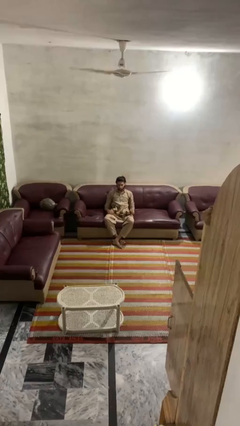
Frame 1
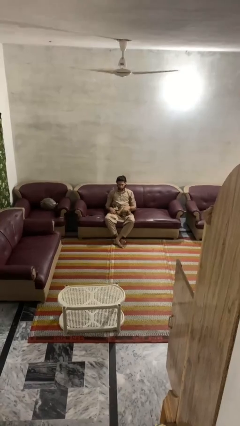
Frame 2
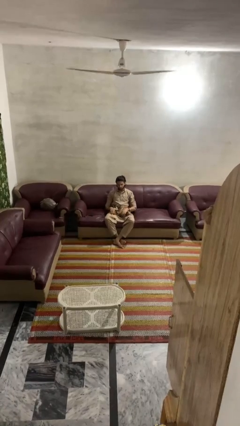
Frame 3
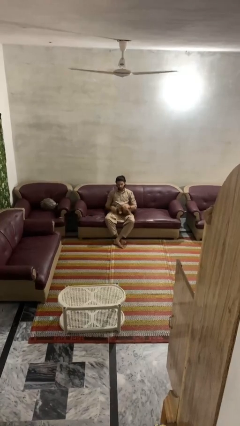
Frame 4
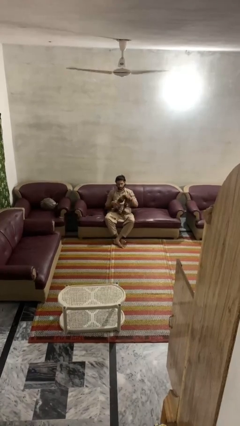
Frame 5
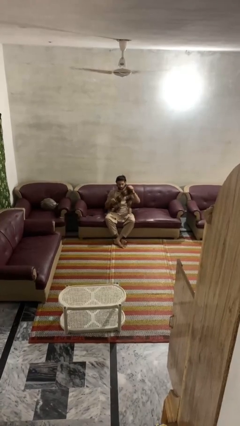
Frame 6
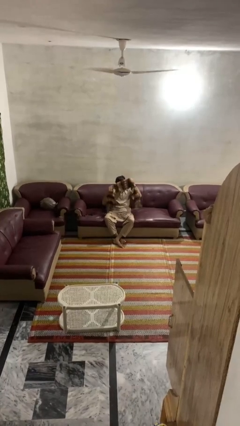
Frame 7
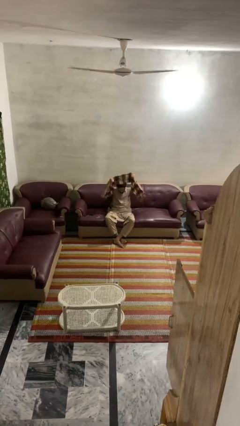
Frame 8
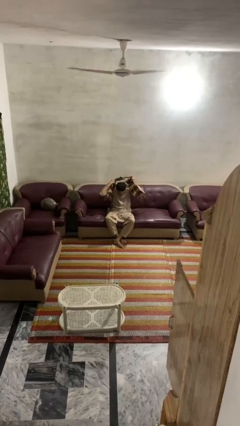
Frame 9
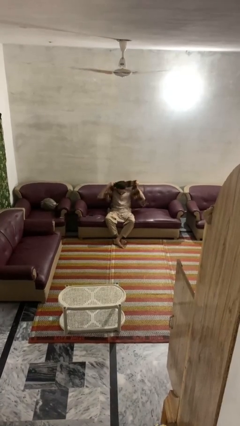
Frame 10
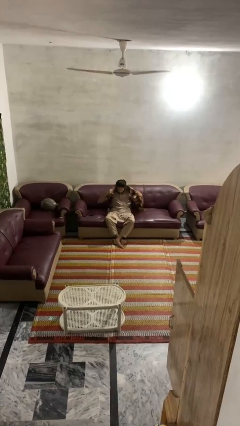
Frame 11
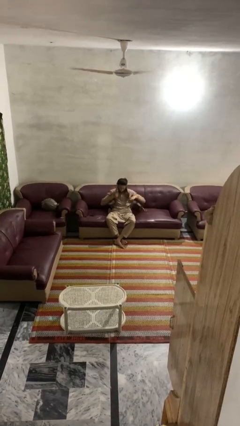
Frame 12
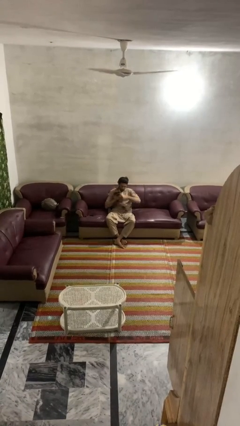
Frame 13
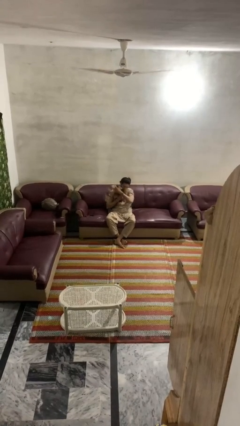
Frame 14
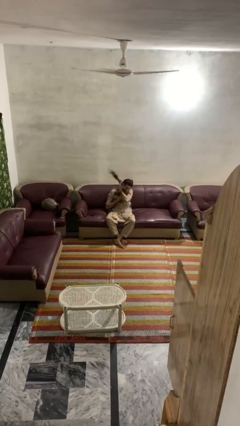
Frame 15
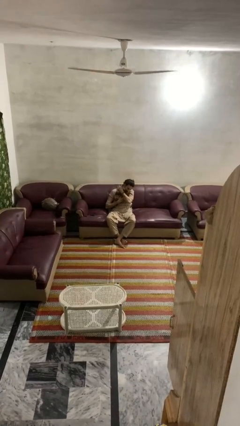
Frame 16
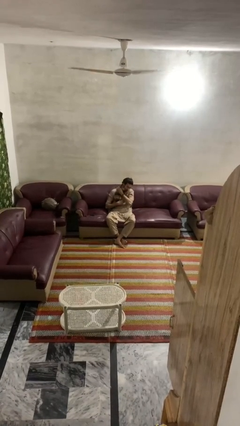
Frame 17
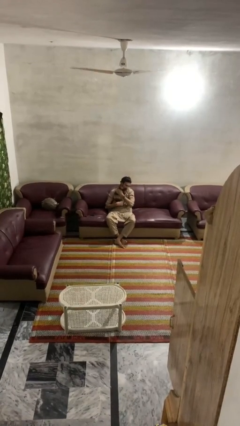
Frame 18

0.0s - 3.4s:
person puts on scarf

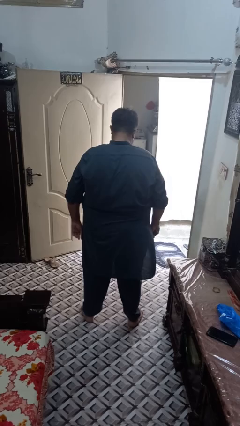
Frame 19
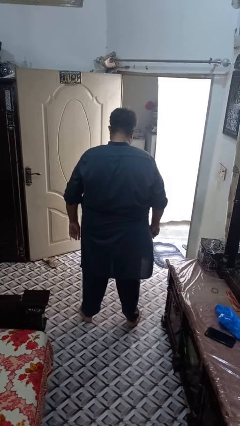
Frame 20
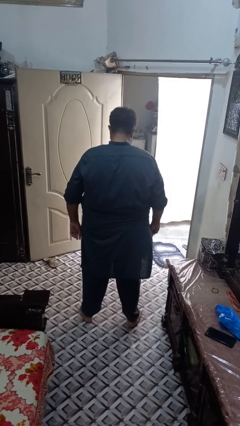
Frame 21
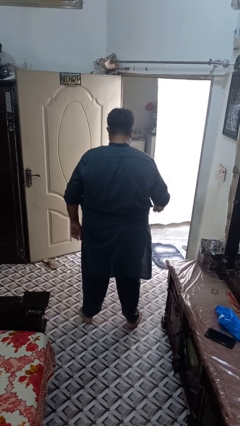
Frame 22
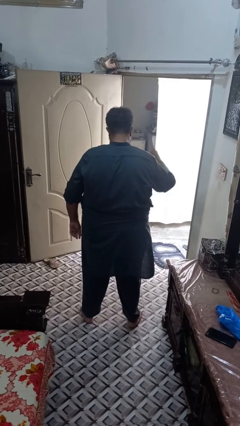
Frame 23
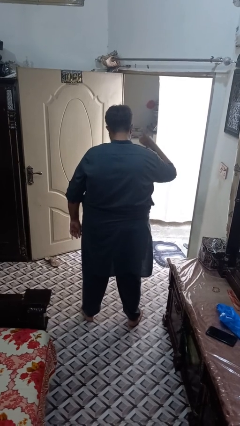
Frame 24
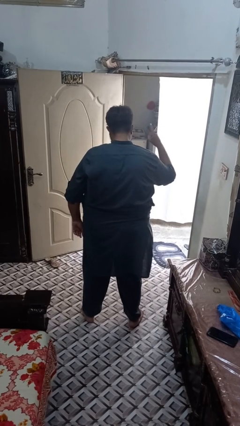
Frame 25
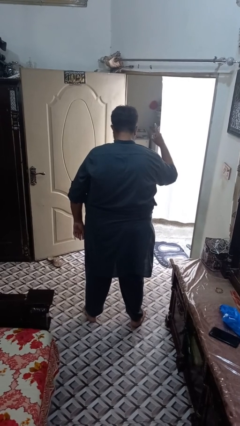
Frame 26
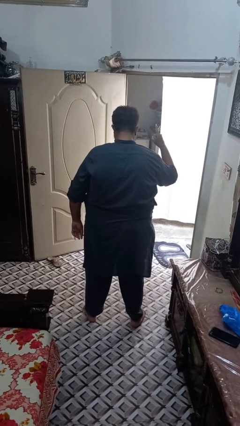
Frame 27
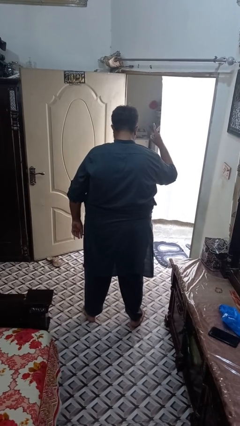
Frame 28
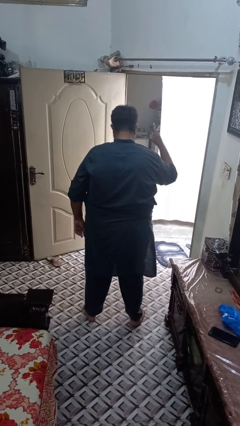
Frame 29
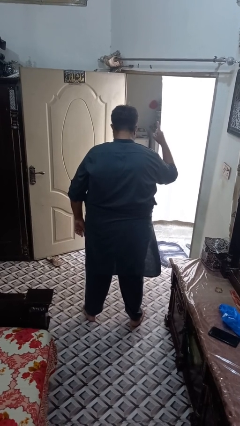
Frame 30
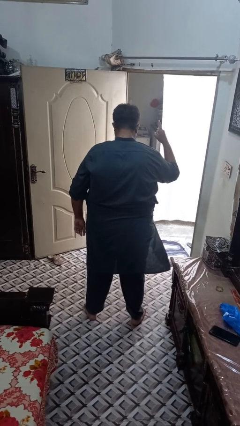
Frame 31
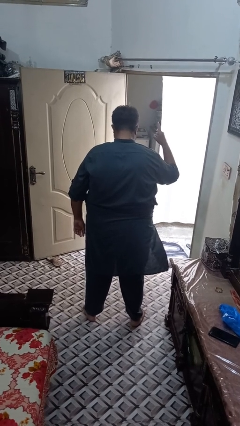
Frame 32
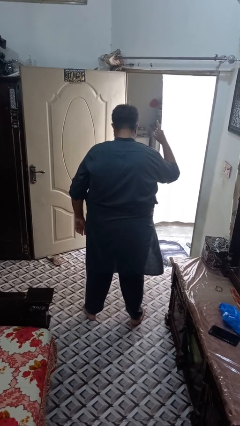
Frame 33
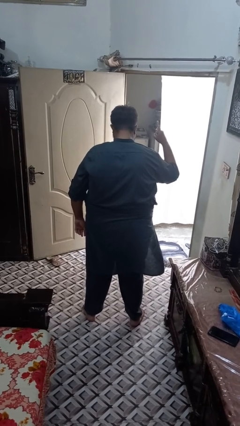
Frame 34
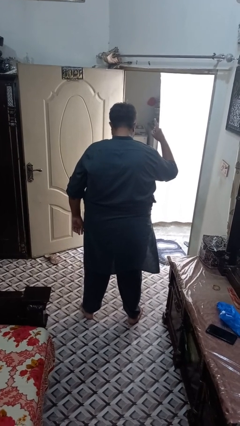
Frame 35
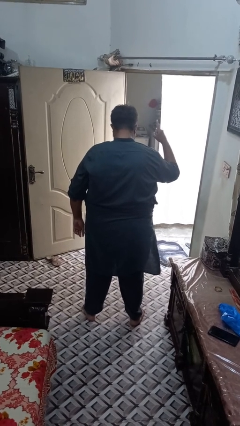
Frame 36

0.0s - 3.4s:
person gestures number one

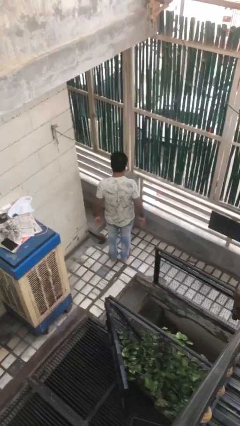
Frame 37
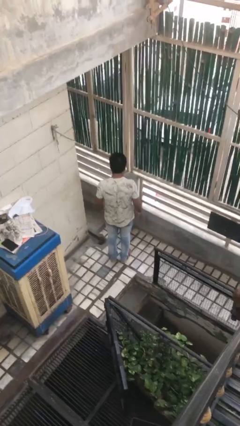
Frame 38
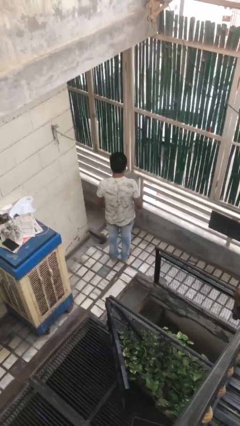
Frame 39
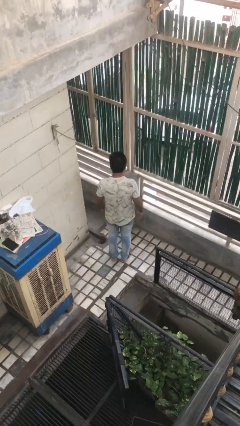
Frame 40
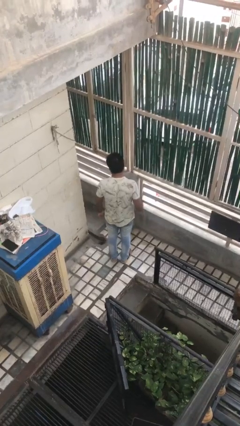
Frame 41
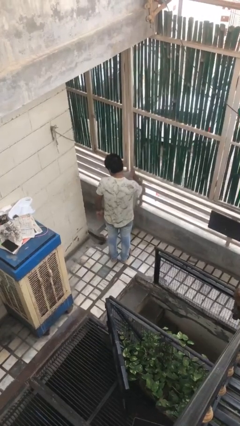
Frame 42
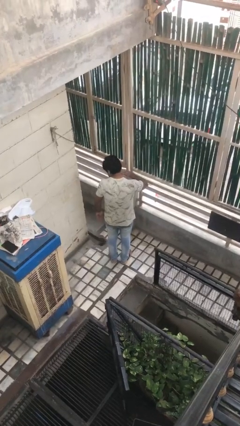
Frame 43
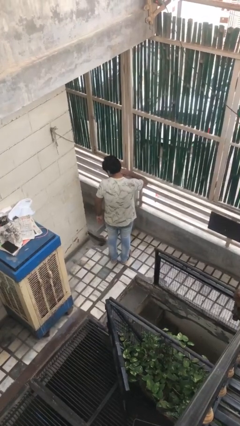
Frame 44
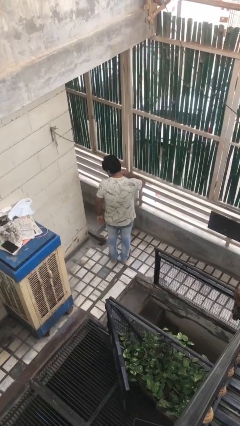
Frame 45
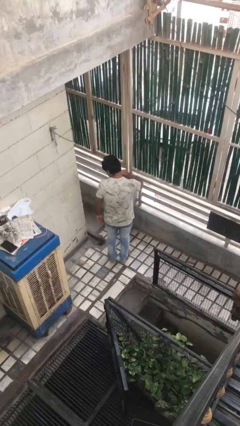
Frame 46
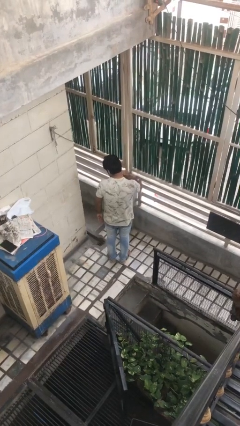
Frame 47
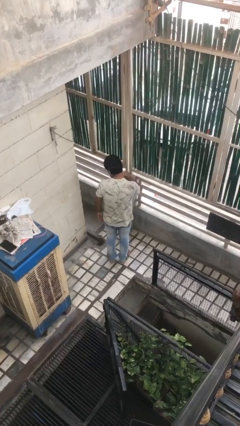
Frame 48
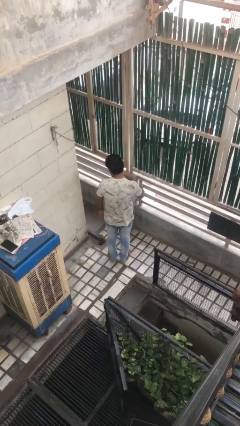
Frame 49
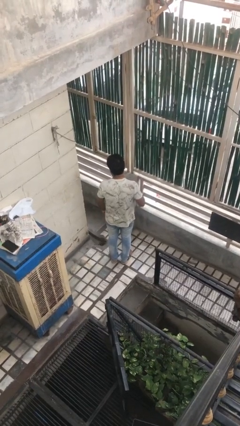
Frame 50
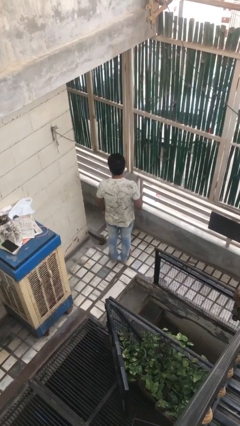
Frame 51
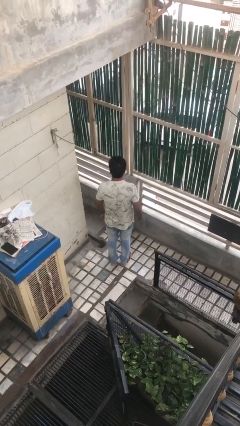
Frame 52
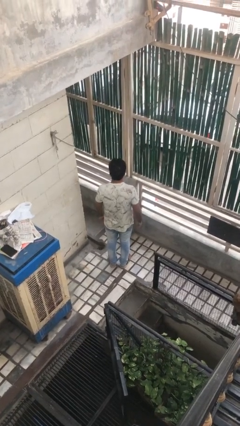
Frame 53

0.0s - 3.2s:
person swats bug

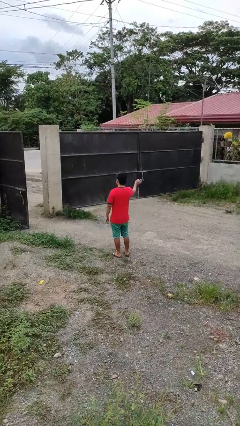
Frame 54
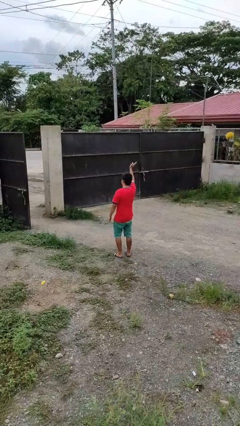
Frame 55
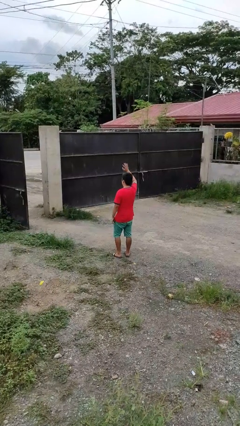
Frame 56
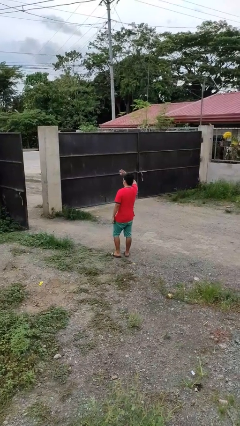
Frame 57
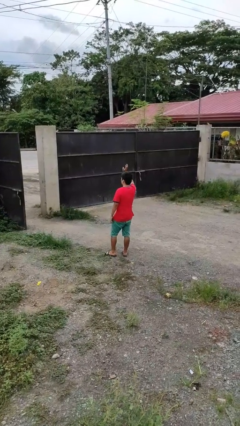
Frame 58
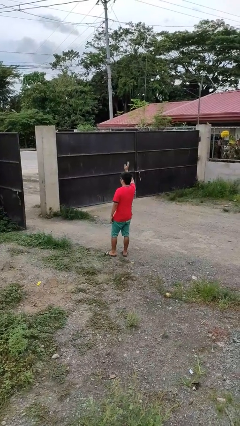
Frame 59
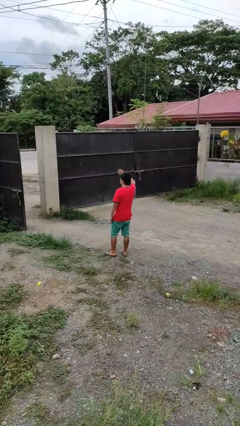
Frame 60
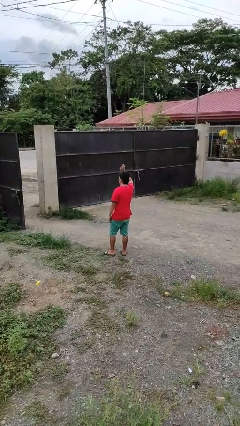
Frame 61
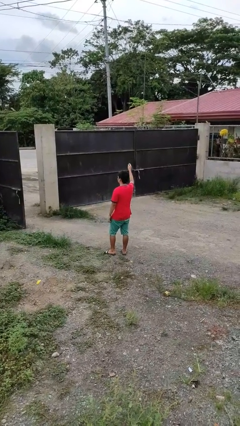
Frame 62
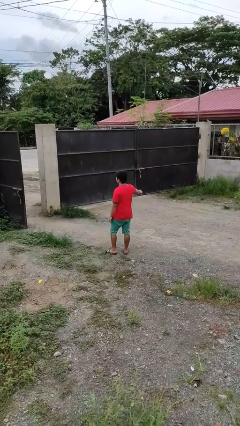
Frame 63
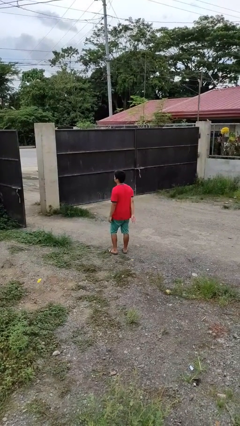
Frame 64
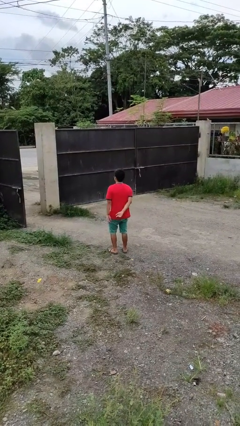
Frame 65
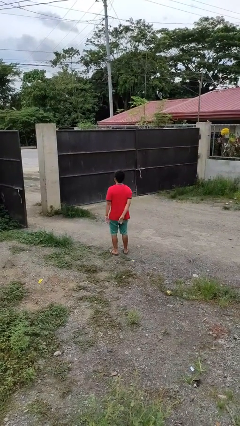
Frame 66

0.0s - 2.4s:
person waves at person

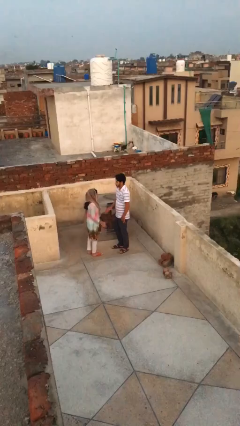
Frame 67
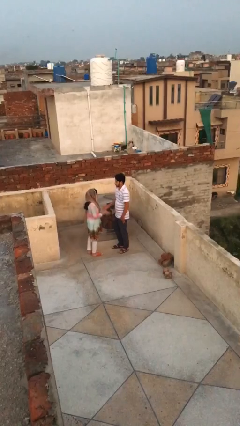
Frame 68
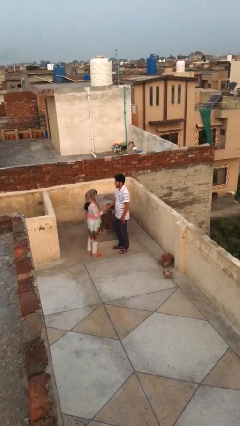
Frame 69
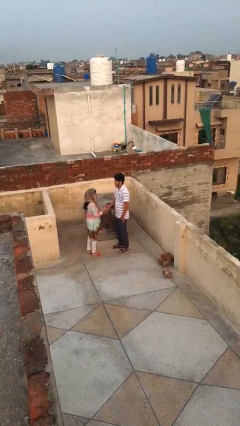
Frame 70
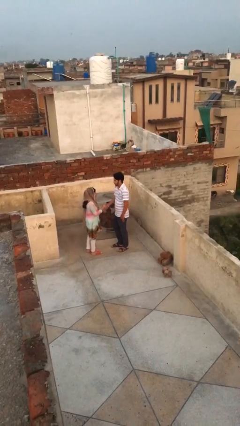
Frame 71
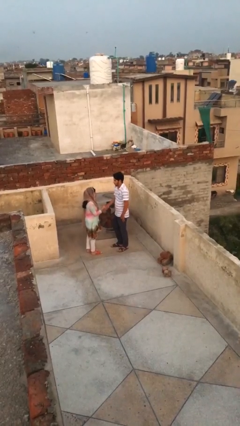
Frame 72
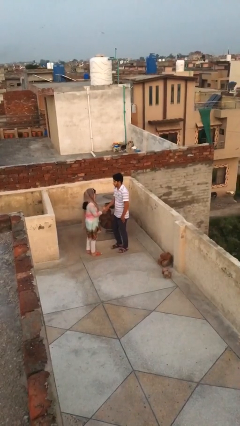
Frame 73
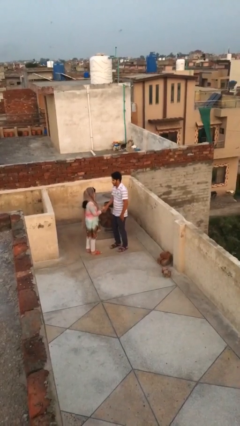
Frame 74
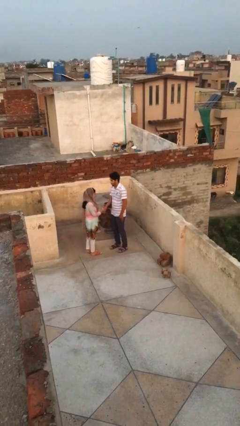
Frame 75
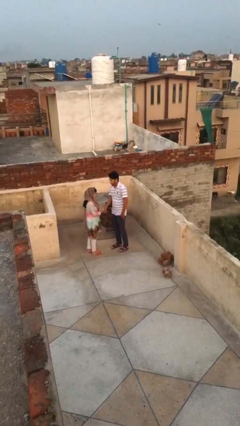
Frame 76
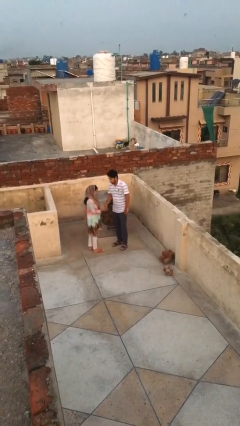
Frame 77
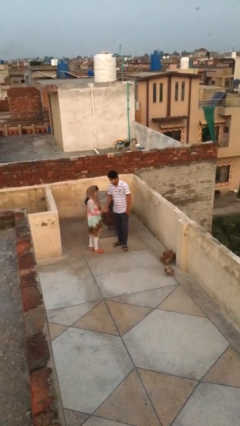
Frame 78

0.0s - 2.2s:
person shakes hand

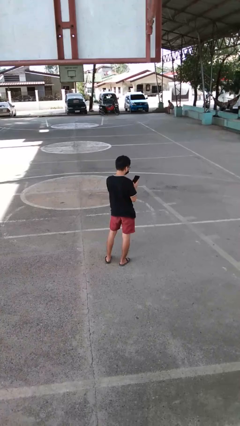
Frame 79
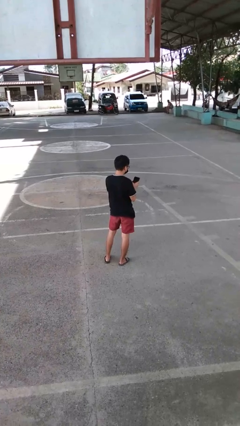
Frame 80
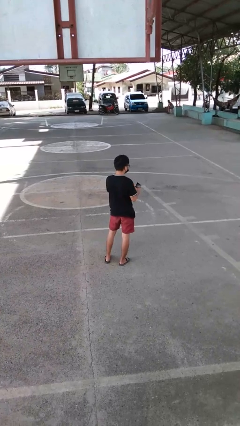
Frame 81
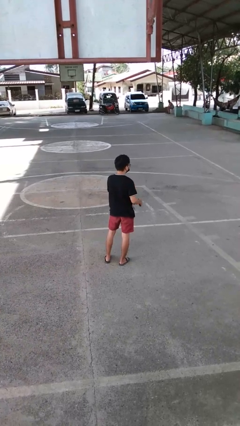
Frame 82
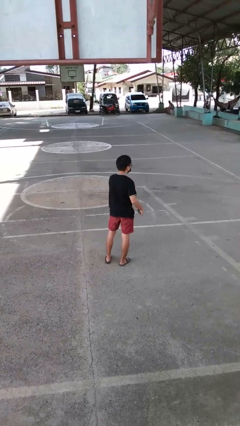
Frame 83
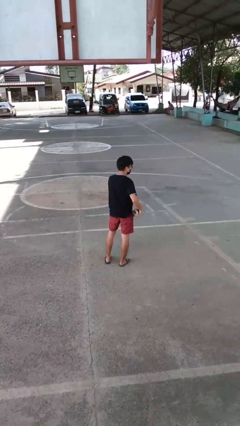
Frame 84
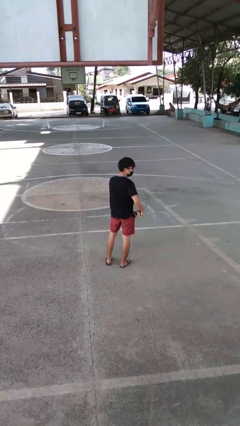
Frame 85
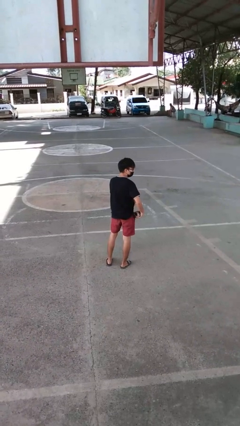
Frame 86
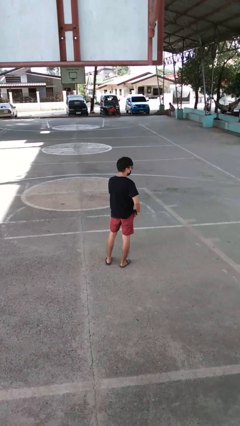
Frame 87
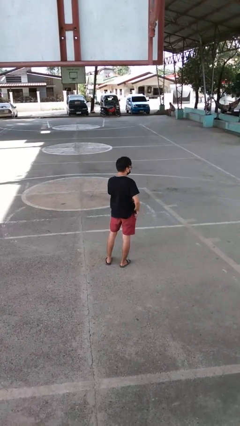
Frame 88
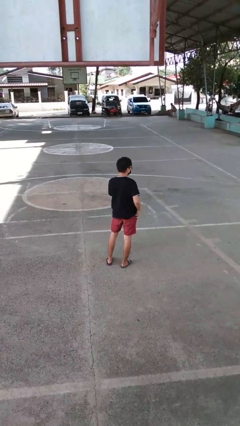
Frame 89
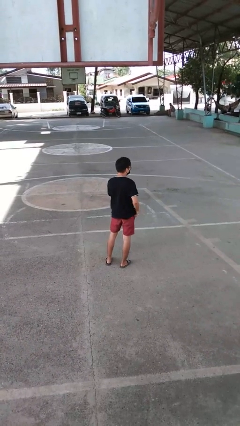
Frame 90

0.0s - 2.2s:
person puts phone into pocket

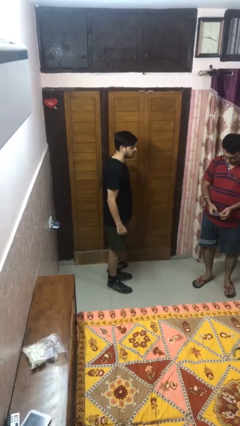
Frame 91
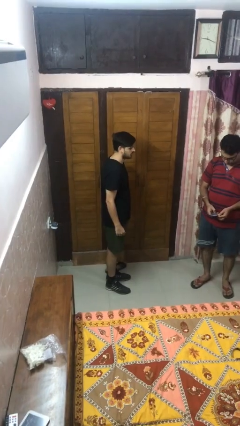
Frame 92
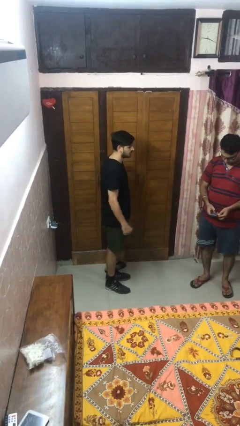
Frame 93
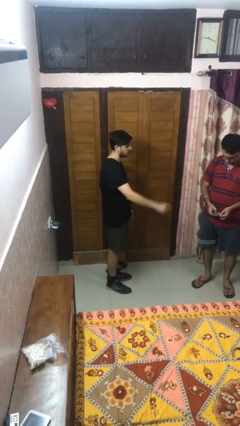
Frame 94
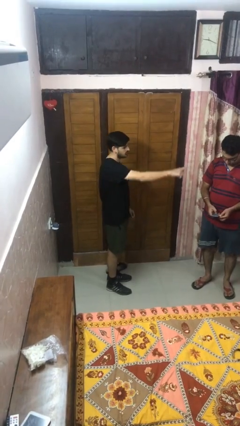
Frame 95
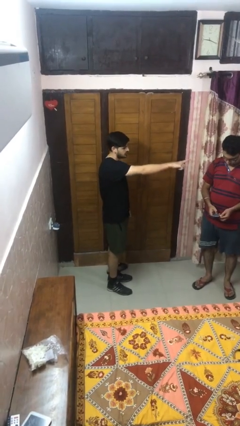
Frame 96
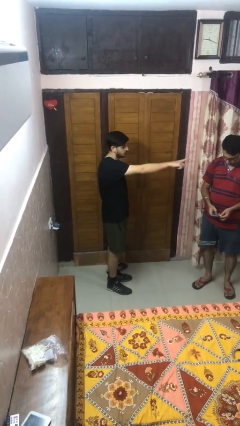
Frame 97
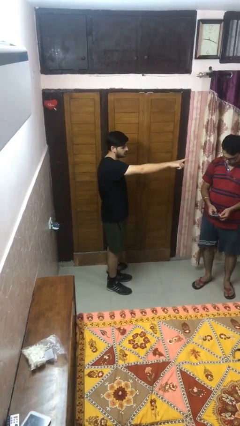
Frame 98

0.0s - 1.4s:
person points at person
